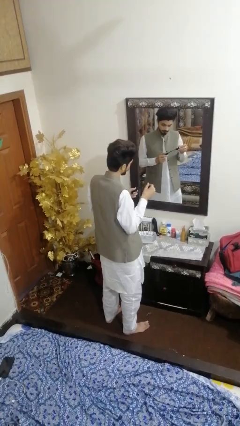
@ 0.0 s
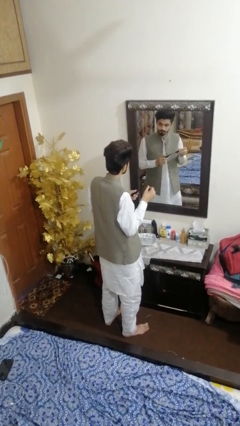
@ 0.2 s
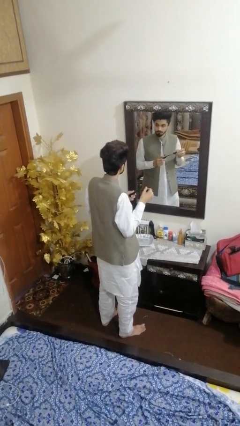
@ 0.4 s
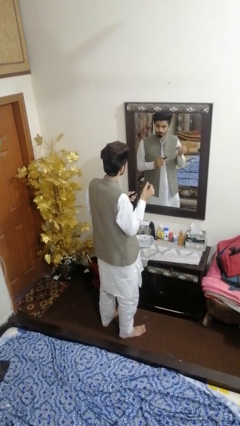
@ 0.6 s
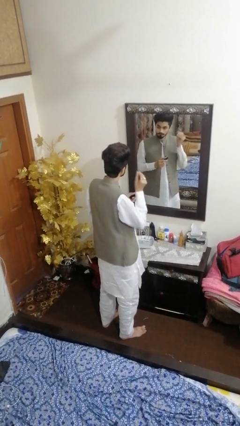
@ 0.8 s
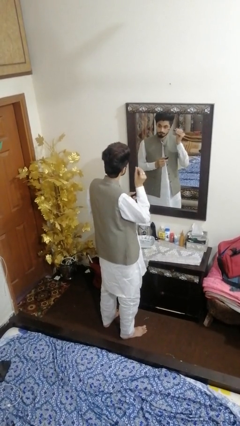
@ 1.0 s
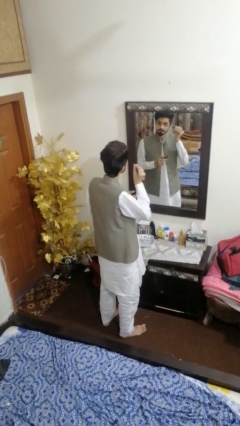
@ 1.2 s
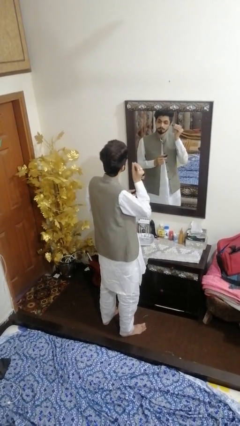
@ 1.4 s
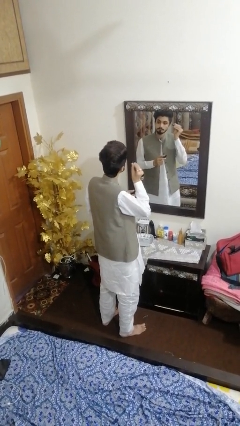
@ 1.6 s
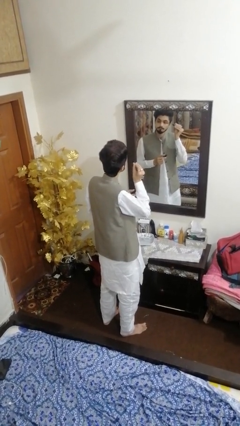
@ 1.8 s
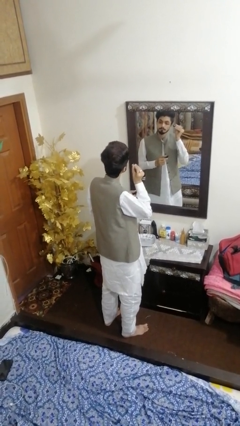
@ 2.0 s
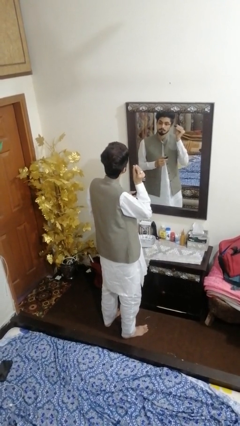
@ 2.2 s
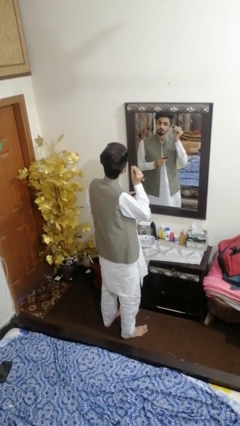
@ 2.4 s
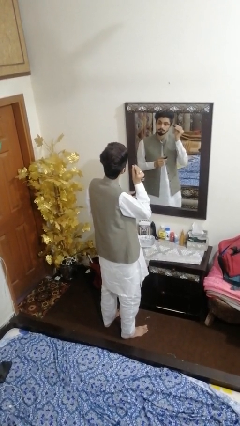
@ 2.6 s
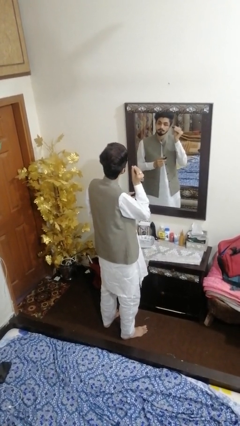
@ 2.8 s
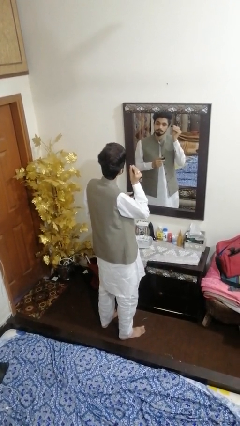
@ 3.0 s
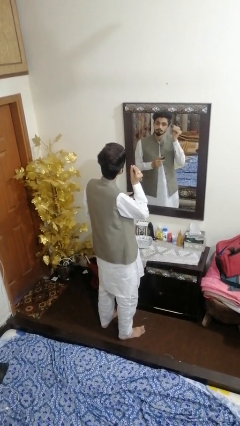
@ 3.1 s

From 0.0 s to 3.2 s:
person applies eye makeup

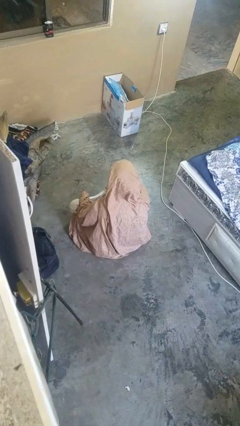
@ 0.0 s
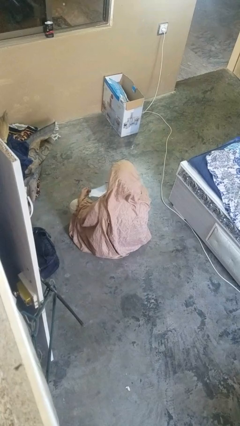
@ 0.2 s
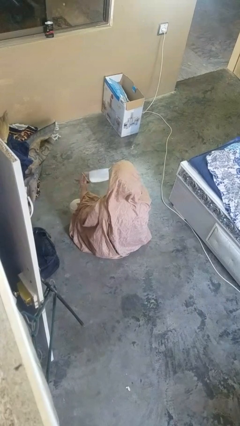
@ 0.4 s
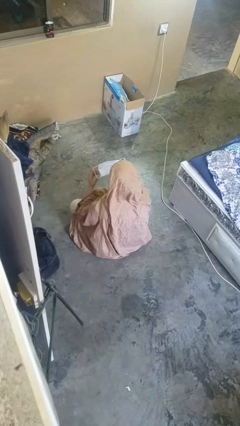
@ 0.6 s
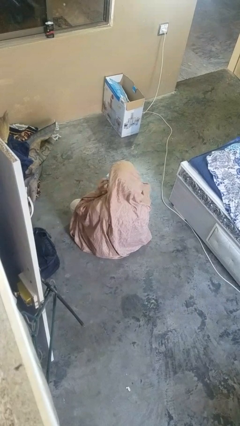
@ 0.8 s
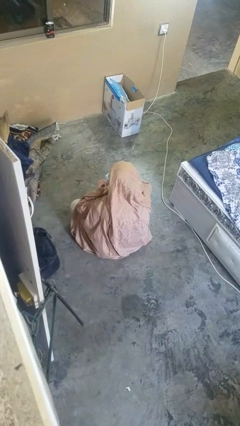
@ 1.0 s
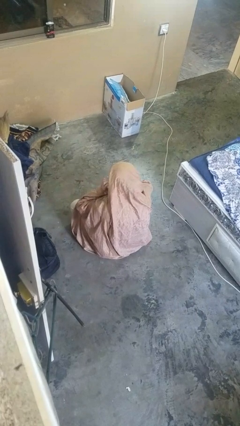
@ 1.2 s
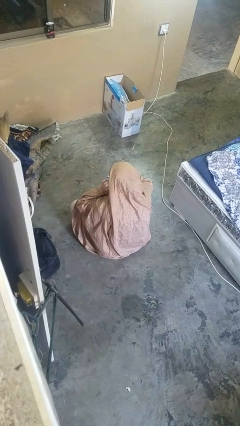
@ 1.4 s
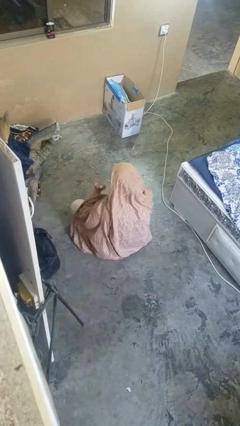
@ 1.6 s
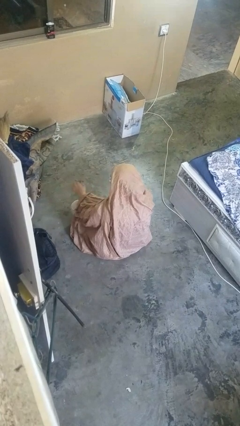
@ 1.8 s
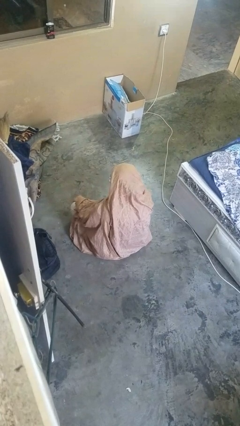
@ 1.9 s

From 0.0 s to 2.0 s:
person puts on facemask

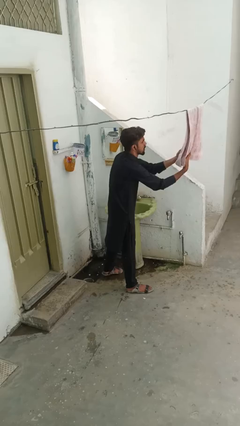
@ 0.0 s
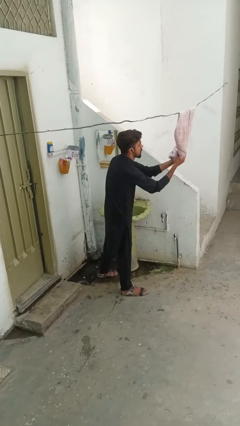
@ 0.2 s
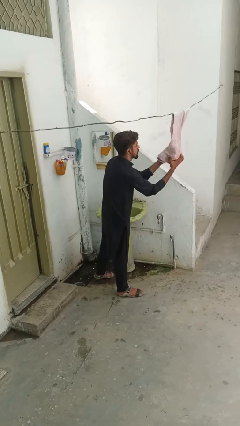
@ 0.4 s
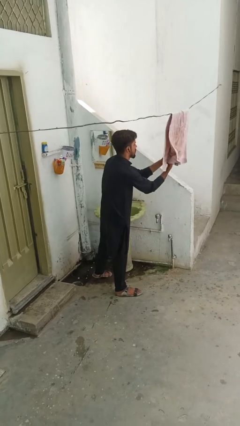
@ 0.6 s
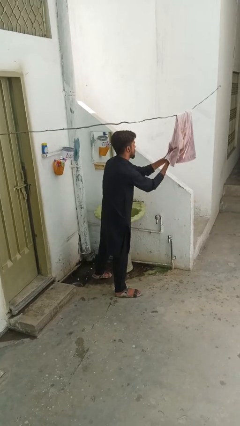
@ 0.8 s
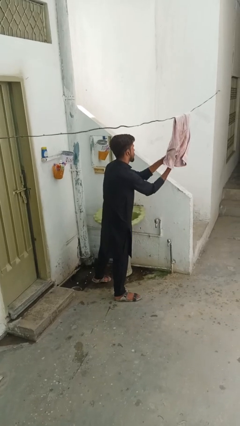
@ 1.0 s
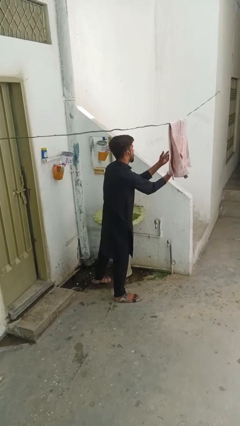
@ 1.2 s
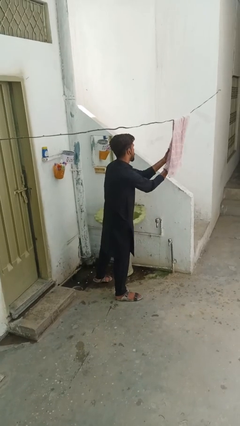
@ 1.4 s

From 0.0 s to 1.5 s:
person dries hands with towel

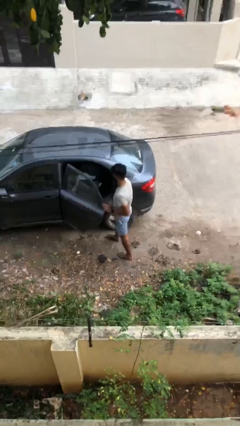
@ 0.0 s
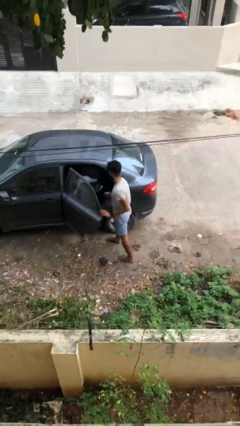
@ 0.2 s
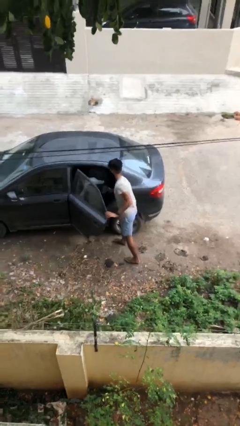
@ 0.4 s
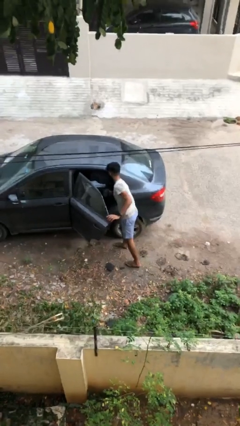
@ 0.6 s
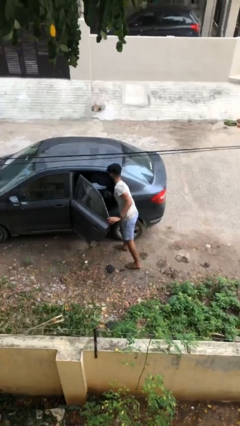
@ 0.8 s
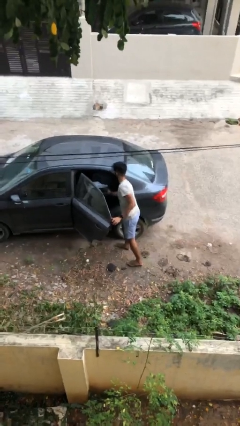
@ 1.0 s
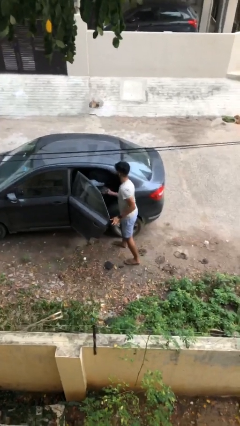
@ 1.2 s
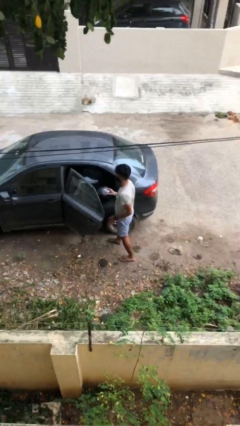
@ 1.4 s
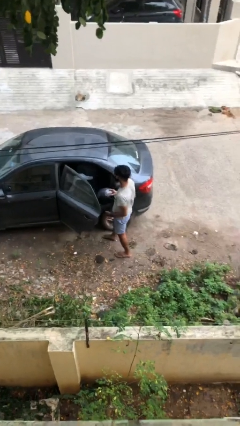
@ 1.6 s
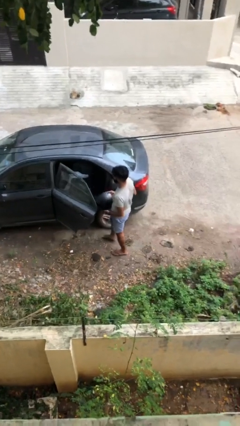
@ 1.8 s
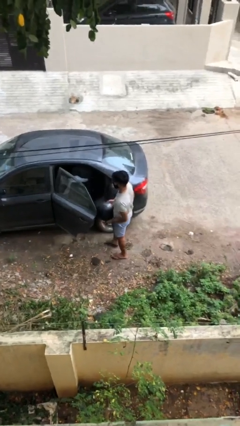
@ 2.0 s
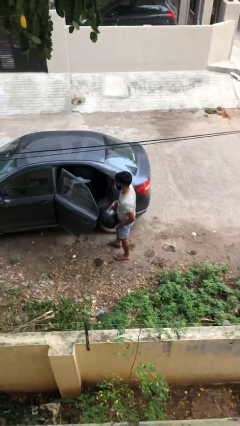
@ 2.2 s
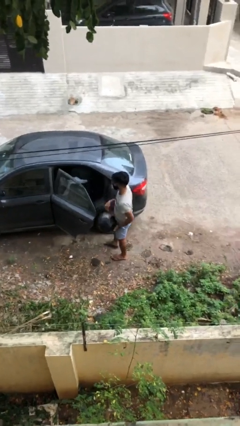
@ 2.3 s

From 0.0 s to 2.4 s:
person unloads car

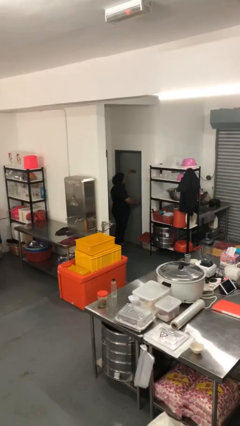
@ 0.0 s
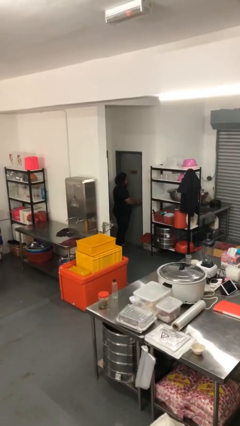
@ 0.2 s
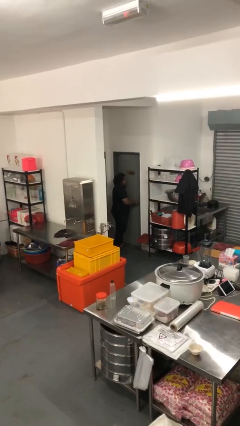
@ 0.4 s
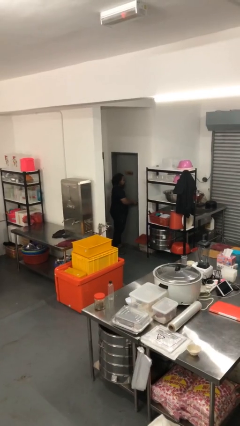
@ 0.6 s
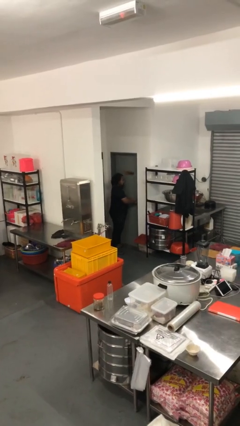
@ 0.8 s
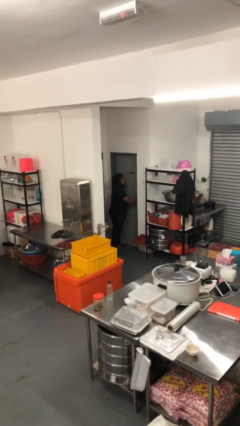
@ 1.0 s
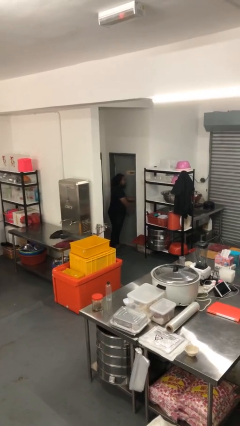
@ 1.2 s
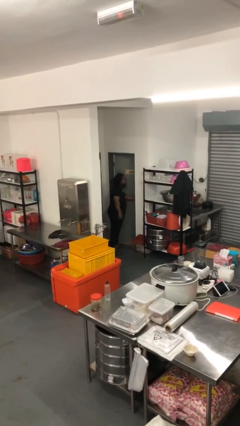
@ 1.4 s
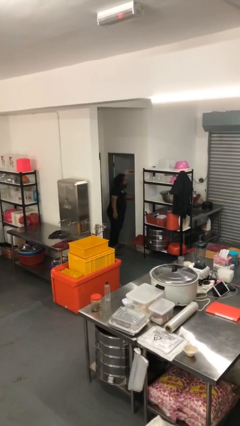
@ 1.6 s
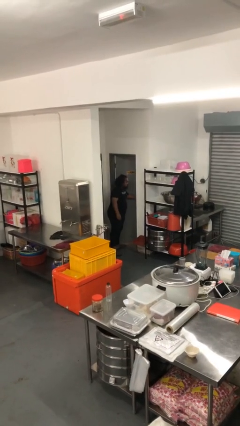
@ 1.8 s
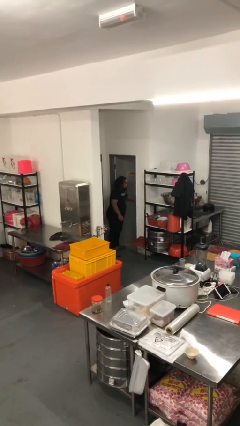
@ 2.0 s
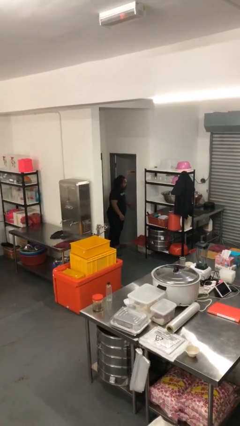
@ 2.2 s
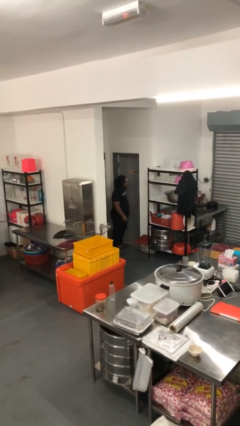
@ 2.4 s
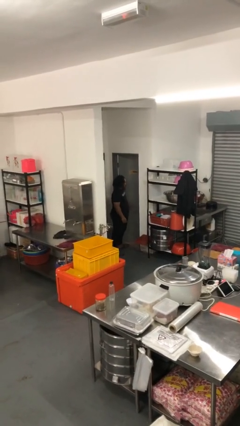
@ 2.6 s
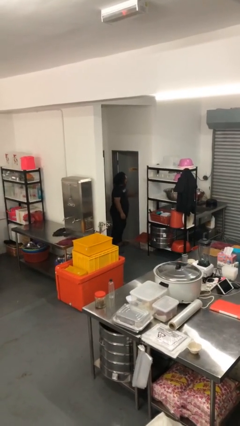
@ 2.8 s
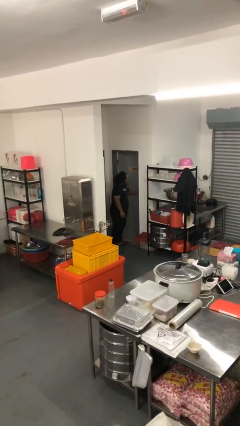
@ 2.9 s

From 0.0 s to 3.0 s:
person opens facility door

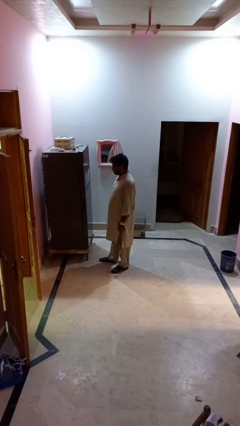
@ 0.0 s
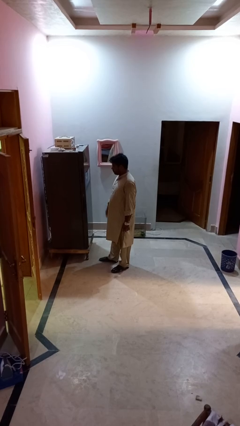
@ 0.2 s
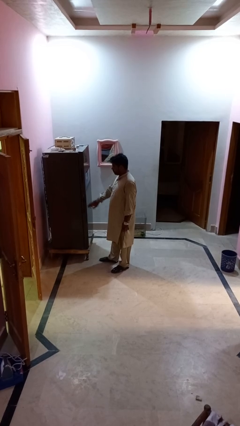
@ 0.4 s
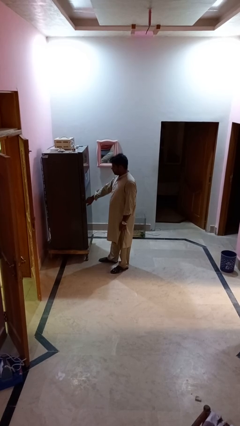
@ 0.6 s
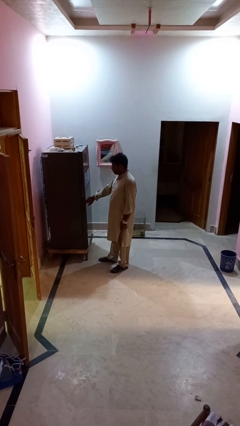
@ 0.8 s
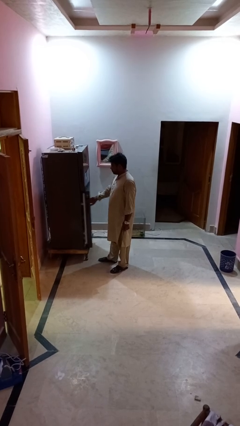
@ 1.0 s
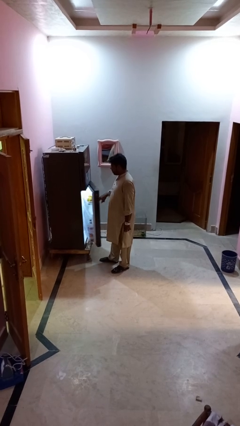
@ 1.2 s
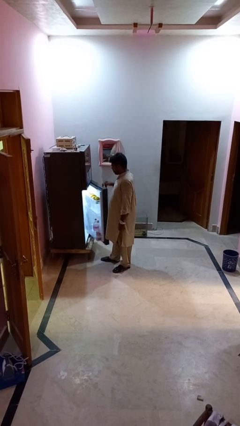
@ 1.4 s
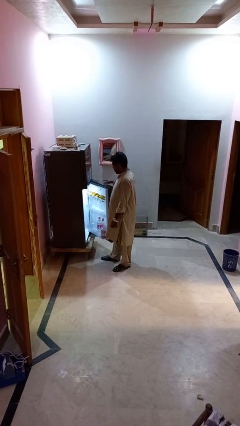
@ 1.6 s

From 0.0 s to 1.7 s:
person opens refrigerator

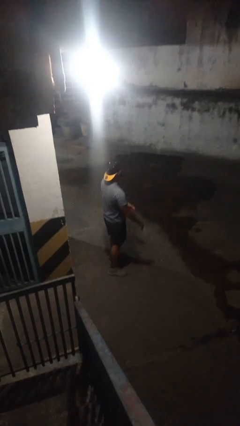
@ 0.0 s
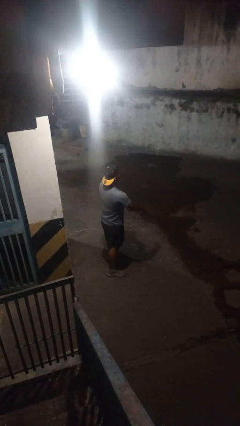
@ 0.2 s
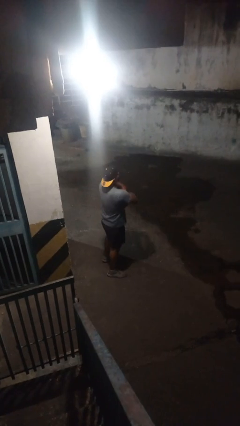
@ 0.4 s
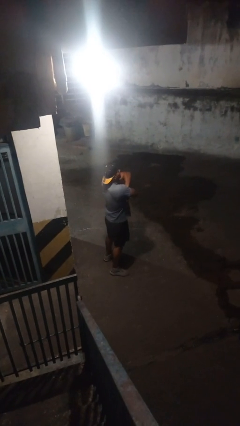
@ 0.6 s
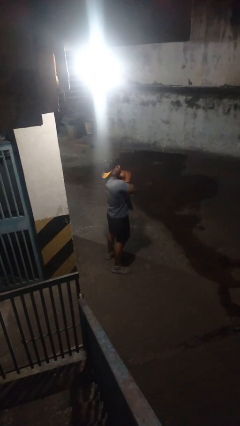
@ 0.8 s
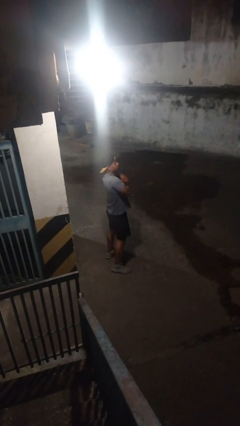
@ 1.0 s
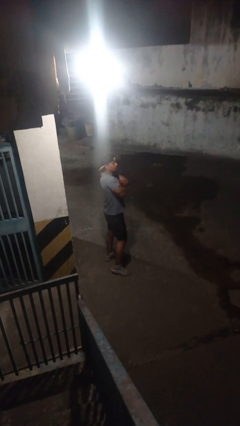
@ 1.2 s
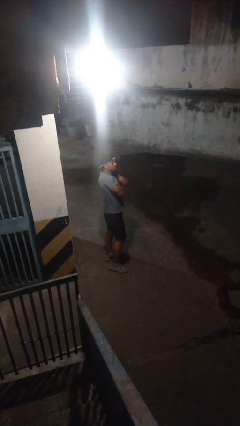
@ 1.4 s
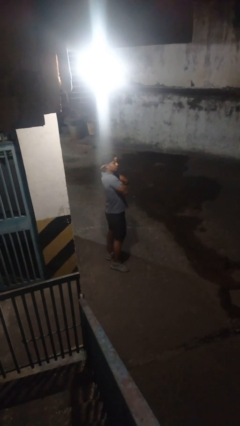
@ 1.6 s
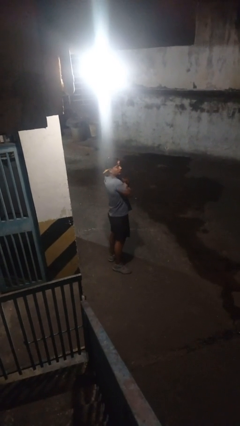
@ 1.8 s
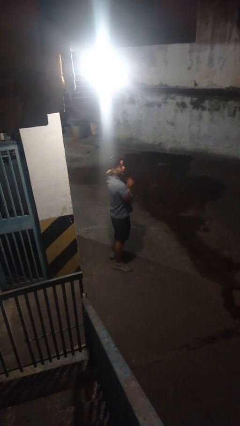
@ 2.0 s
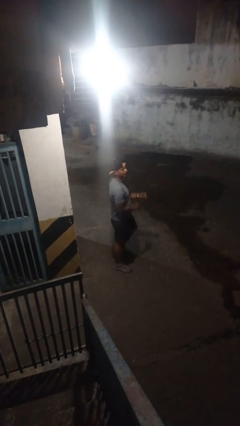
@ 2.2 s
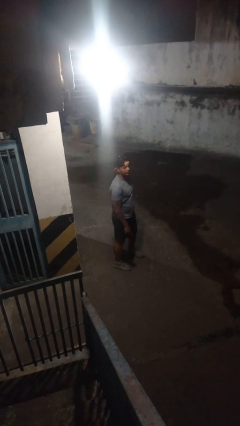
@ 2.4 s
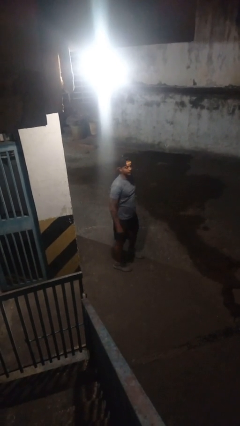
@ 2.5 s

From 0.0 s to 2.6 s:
person crosses arms

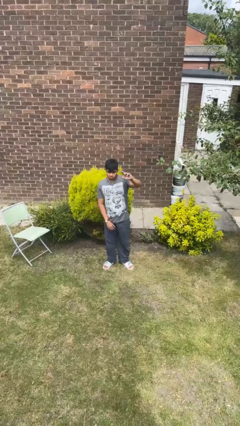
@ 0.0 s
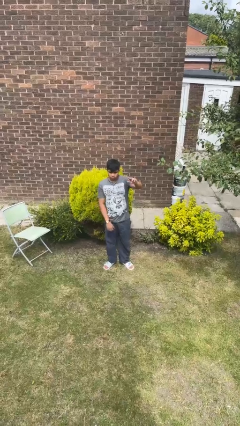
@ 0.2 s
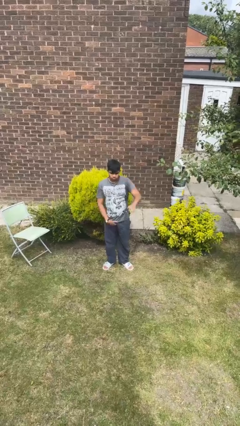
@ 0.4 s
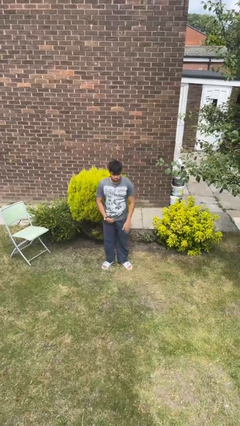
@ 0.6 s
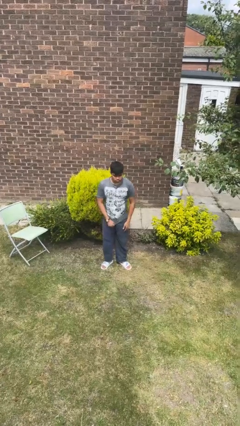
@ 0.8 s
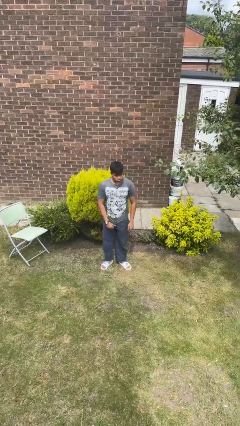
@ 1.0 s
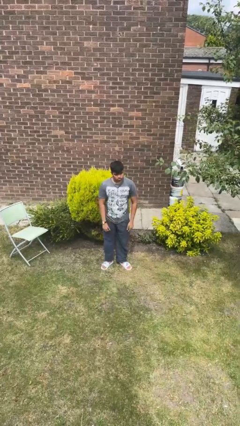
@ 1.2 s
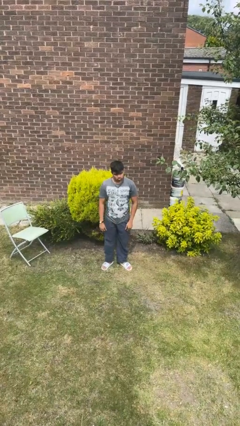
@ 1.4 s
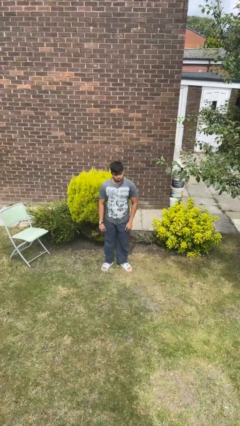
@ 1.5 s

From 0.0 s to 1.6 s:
person gestures lower hand
